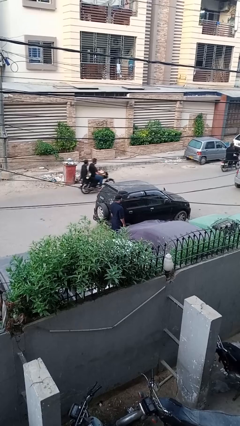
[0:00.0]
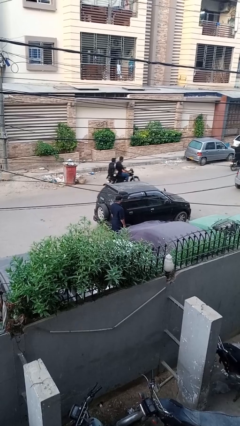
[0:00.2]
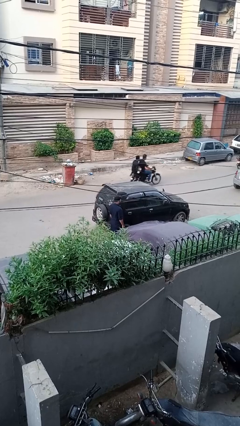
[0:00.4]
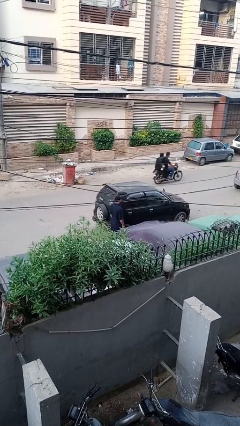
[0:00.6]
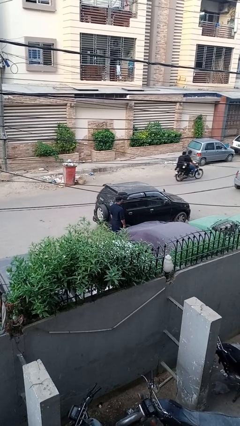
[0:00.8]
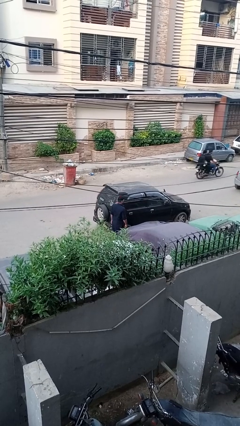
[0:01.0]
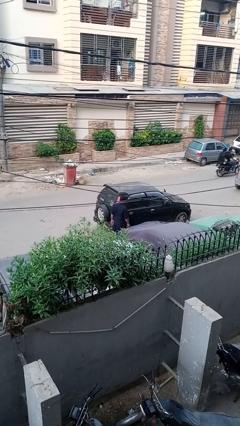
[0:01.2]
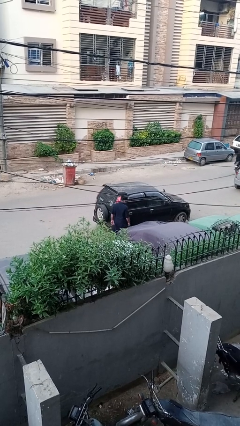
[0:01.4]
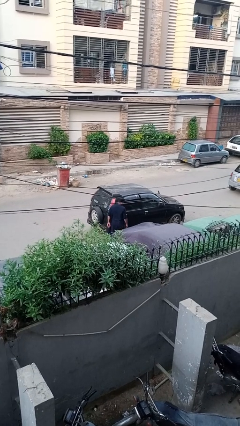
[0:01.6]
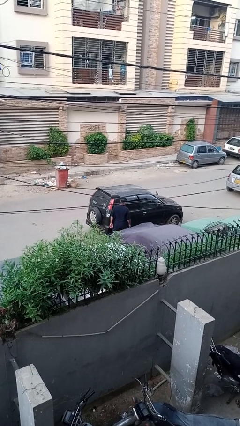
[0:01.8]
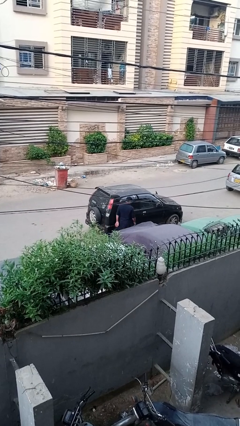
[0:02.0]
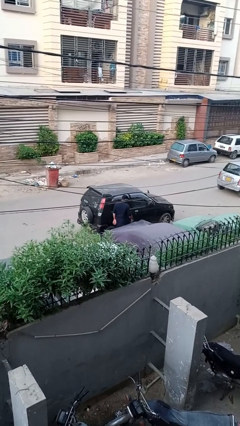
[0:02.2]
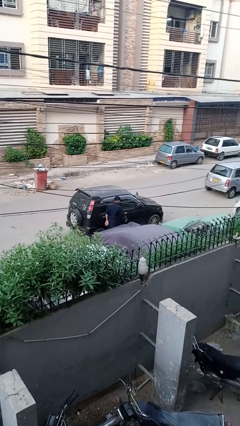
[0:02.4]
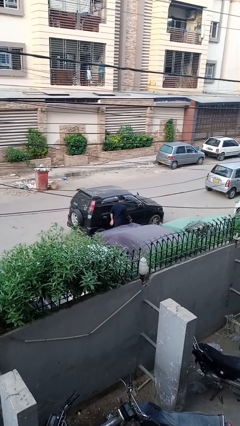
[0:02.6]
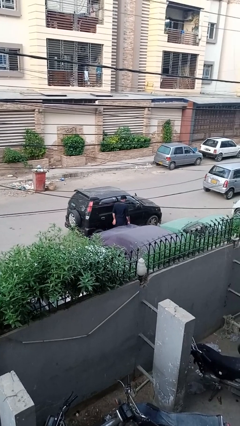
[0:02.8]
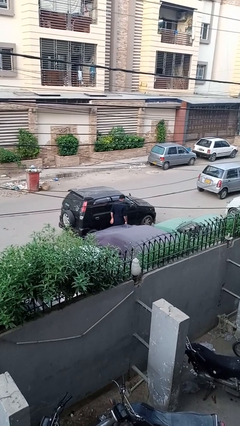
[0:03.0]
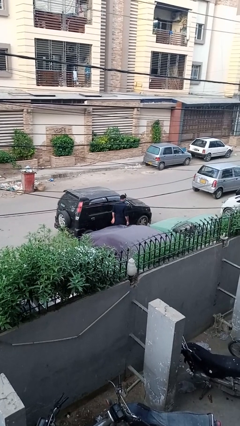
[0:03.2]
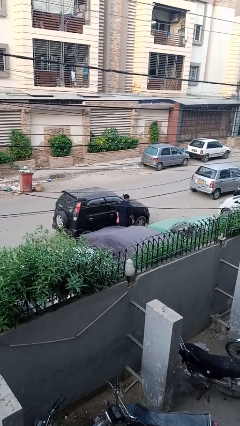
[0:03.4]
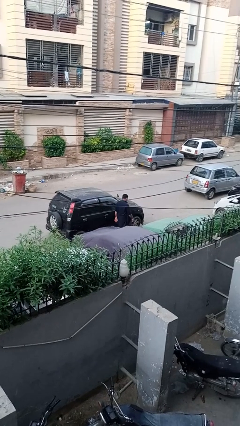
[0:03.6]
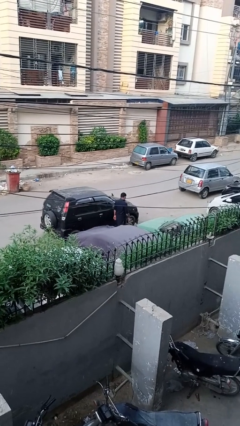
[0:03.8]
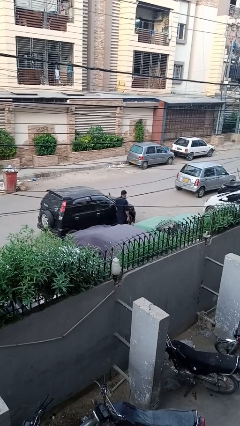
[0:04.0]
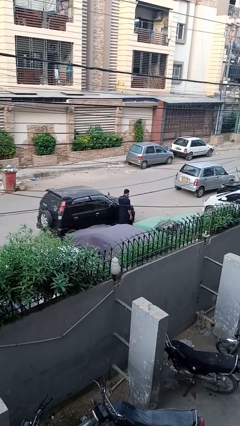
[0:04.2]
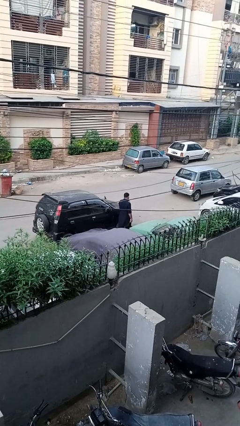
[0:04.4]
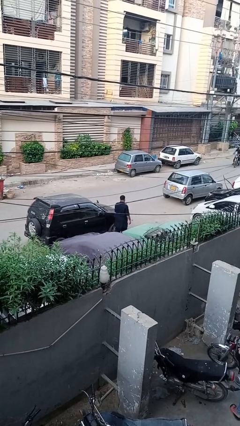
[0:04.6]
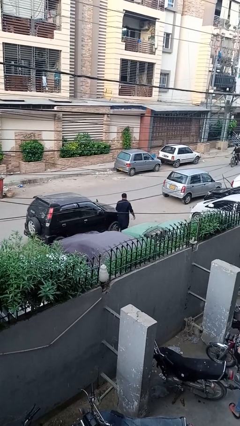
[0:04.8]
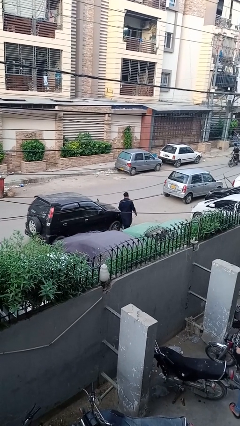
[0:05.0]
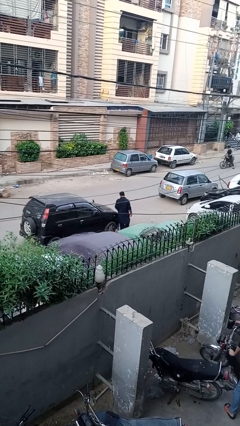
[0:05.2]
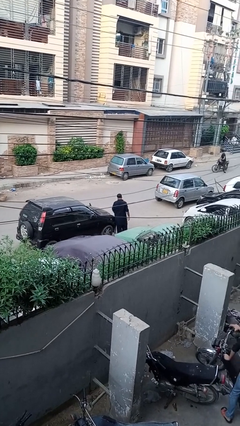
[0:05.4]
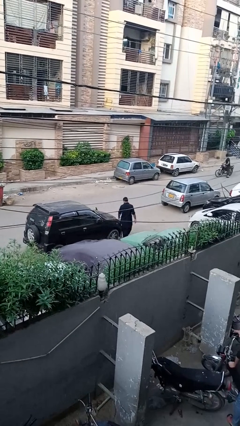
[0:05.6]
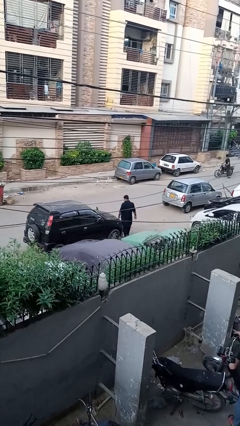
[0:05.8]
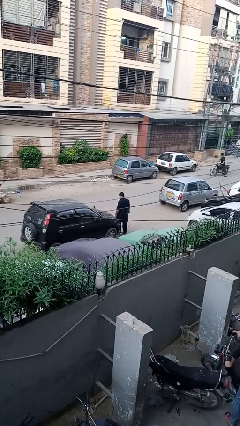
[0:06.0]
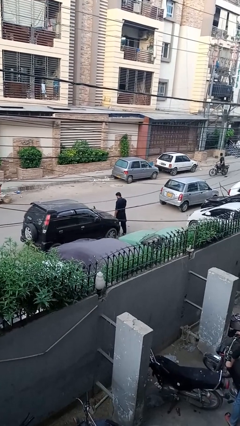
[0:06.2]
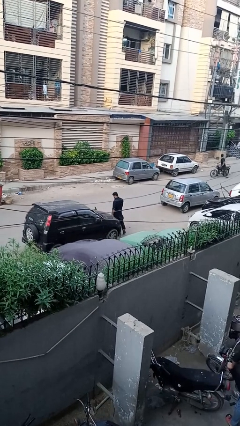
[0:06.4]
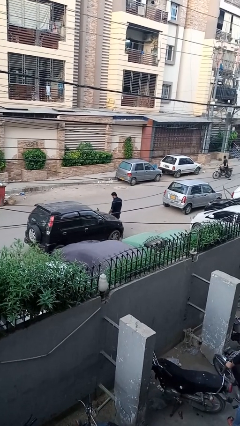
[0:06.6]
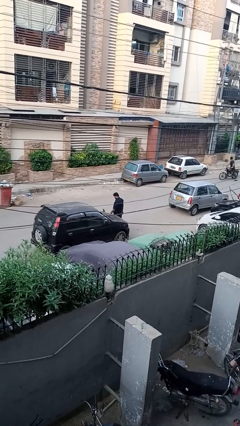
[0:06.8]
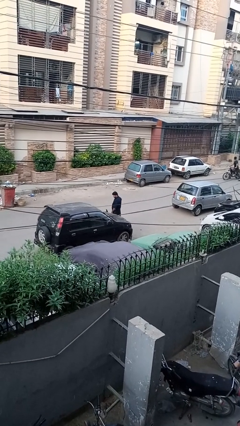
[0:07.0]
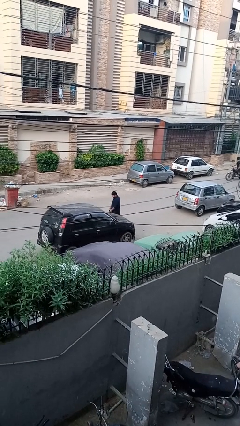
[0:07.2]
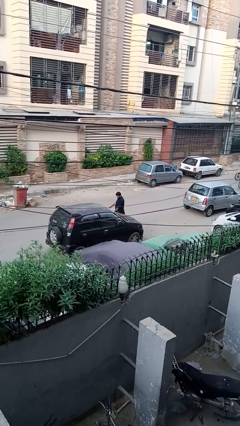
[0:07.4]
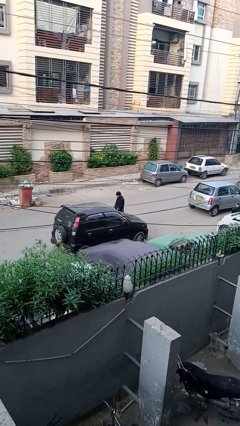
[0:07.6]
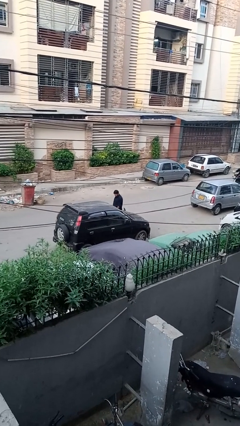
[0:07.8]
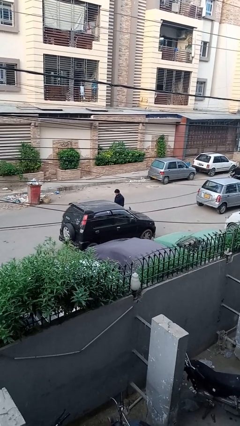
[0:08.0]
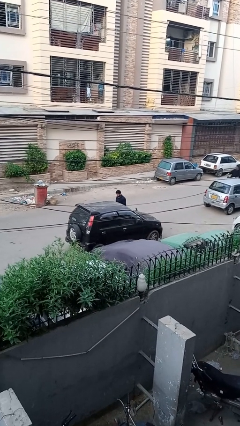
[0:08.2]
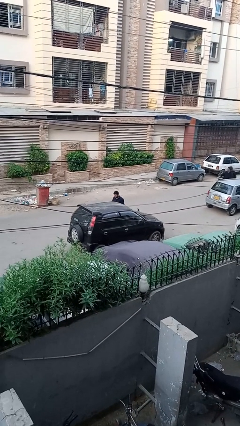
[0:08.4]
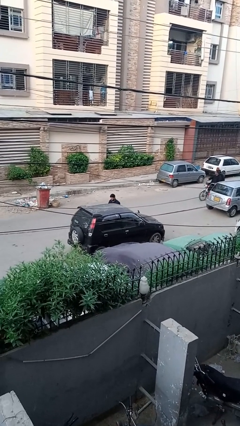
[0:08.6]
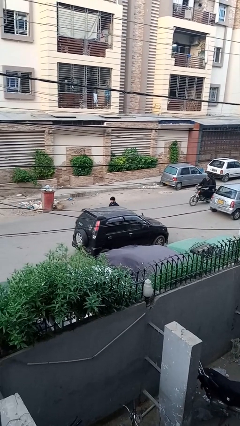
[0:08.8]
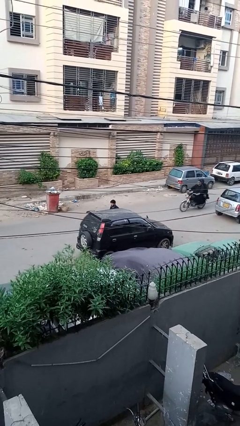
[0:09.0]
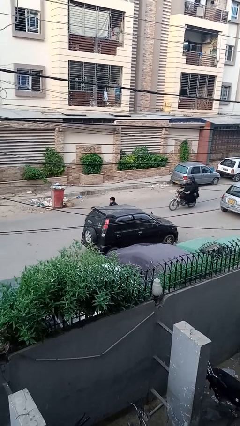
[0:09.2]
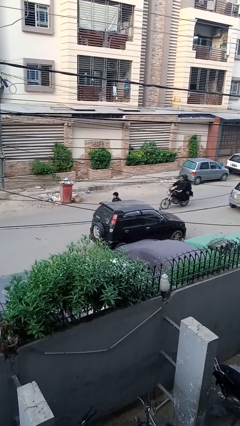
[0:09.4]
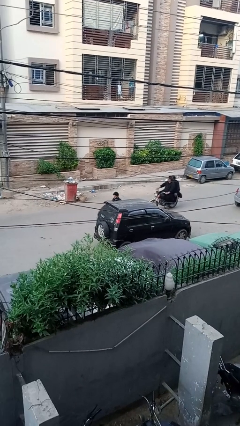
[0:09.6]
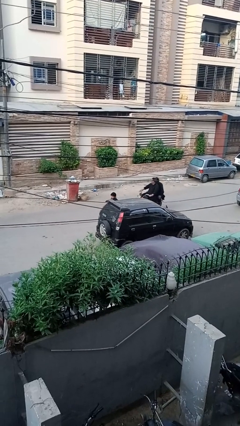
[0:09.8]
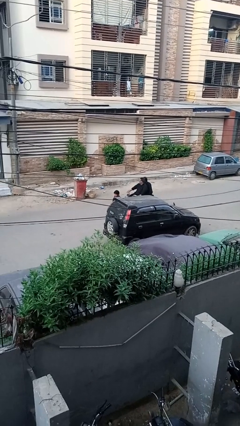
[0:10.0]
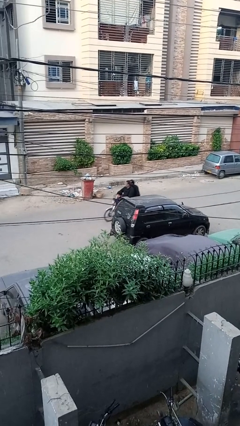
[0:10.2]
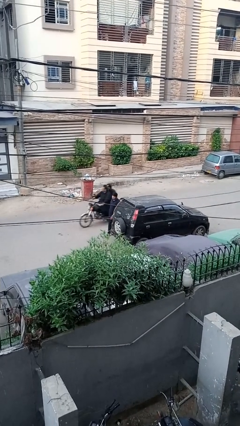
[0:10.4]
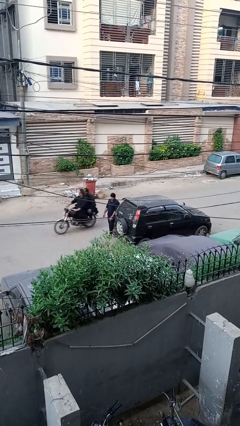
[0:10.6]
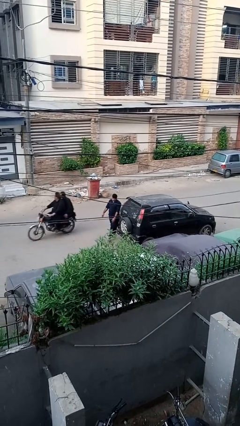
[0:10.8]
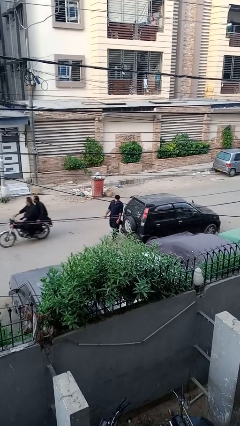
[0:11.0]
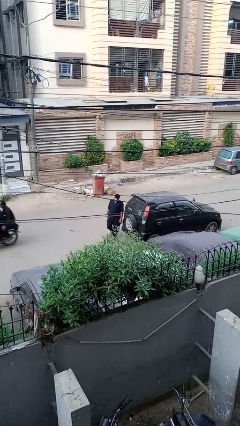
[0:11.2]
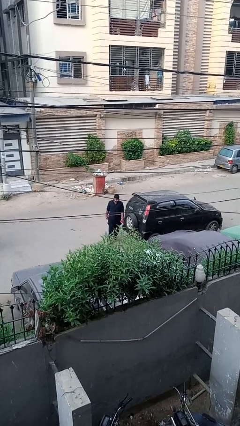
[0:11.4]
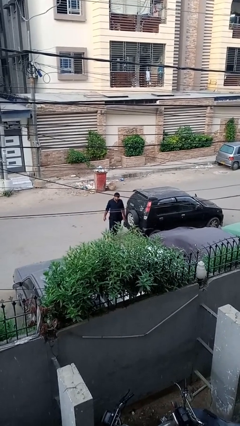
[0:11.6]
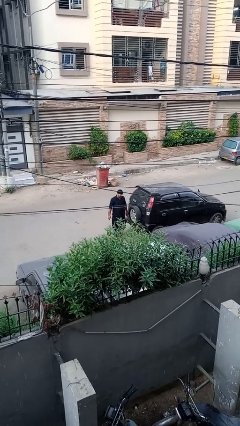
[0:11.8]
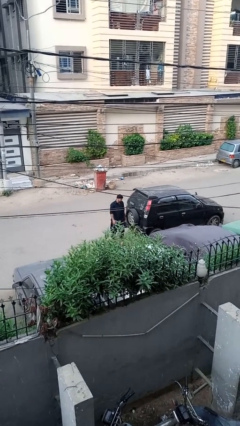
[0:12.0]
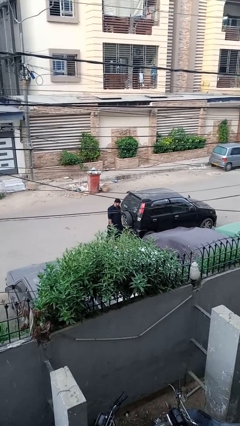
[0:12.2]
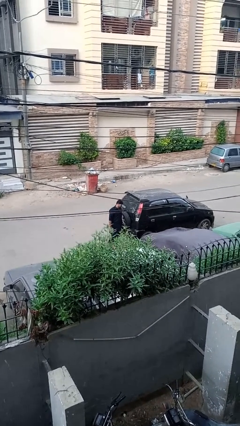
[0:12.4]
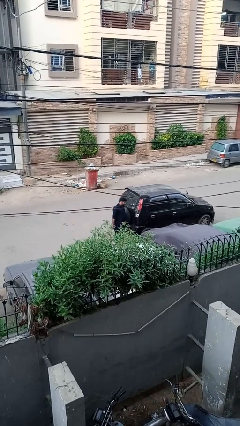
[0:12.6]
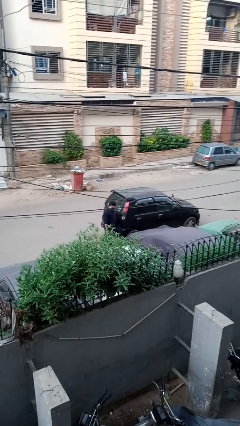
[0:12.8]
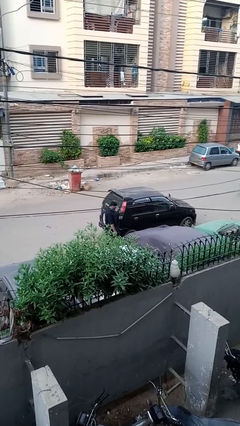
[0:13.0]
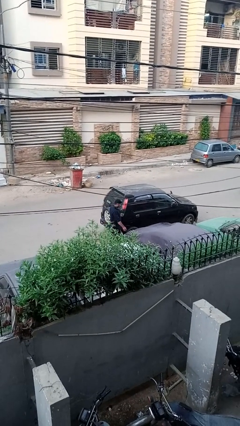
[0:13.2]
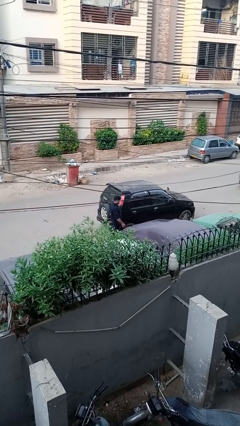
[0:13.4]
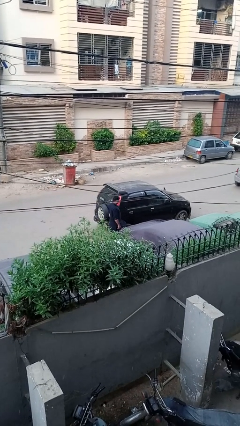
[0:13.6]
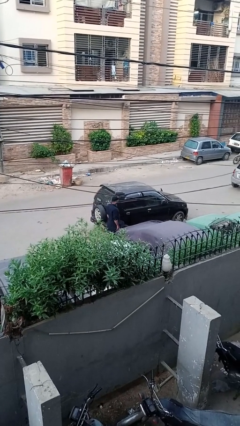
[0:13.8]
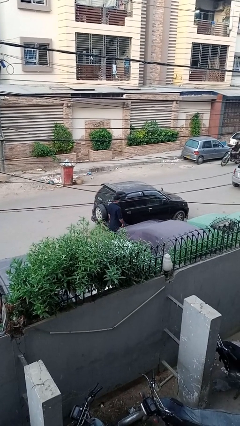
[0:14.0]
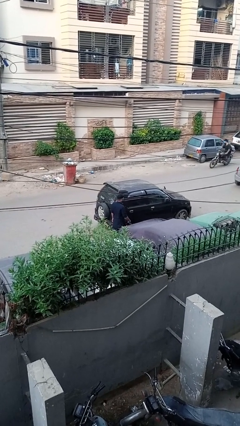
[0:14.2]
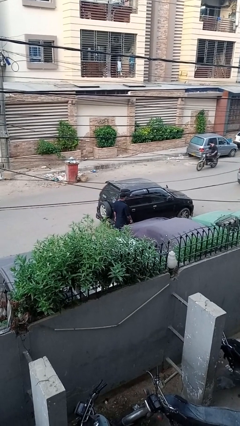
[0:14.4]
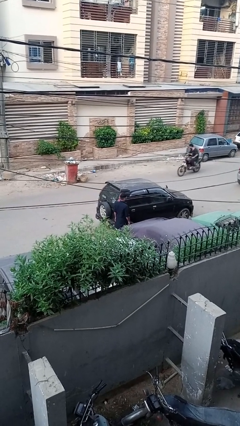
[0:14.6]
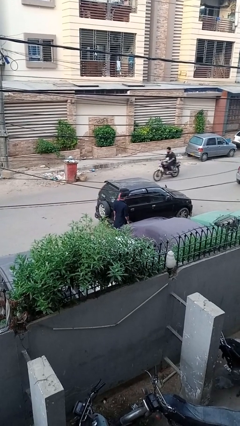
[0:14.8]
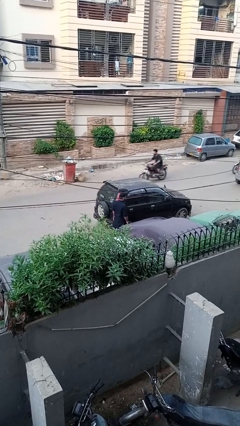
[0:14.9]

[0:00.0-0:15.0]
person walks around car

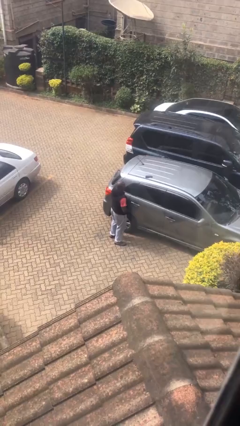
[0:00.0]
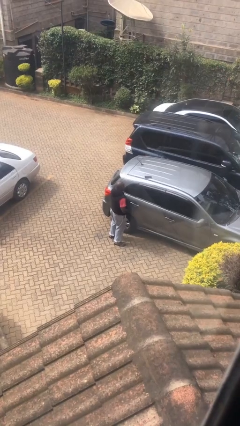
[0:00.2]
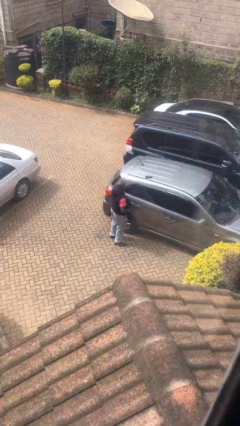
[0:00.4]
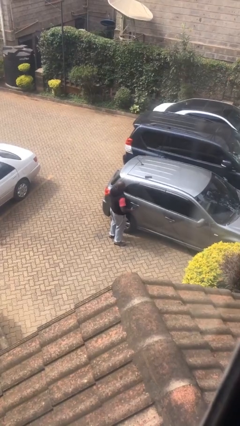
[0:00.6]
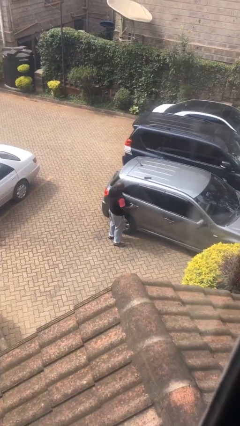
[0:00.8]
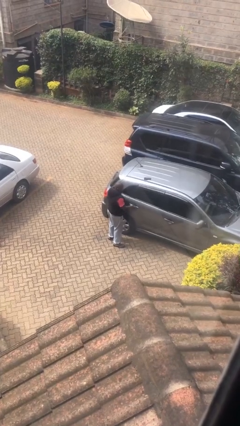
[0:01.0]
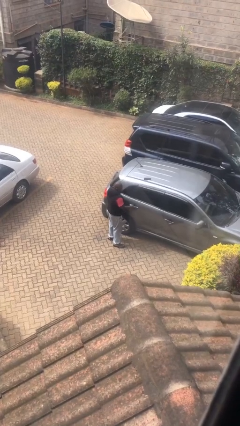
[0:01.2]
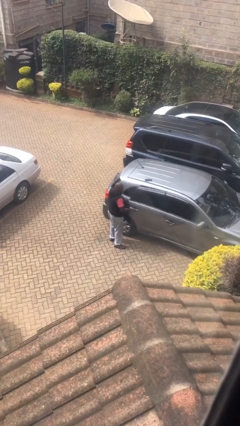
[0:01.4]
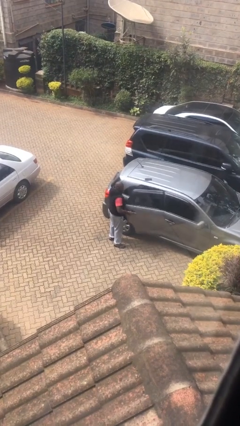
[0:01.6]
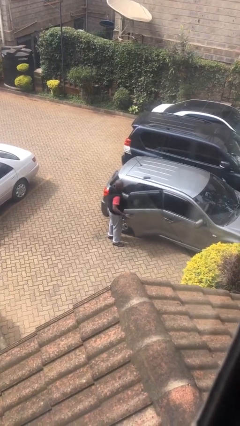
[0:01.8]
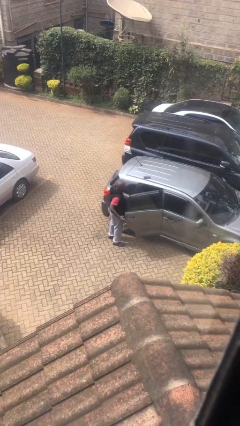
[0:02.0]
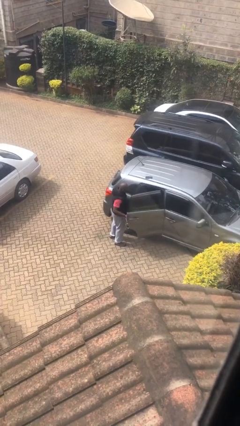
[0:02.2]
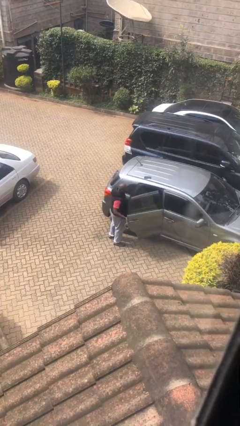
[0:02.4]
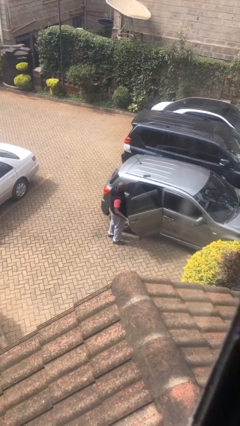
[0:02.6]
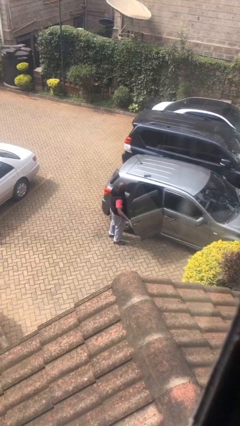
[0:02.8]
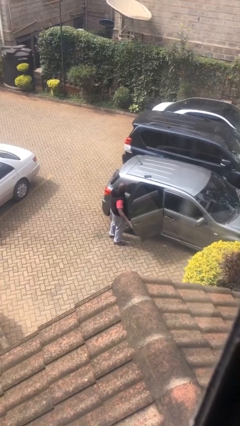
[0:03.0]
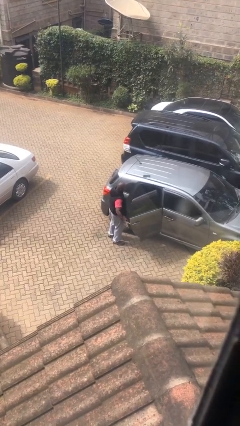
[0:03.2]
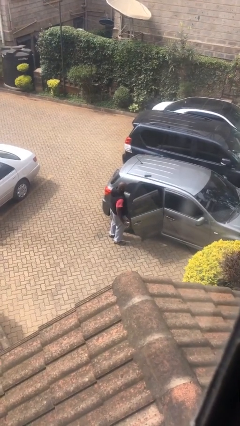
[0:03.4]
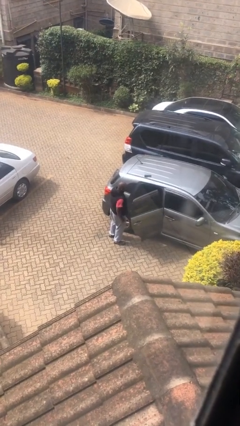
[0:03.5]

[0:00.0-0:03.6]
person opens car door
